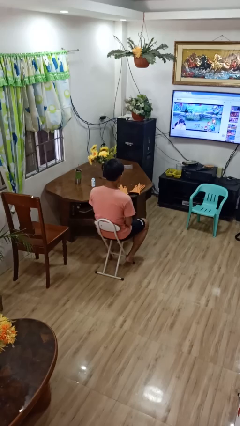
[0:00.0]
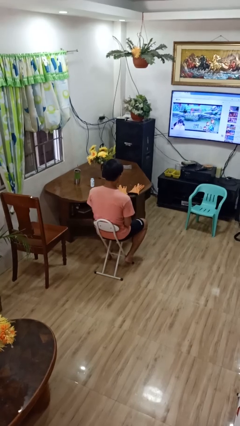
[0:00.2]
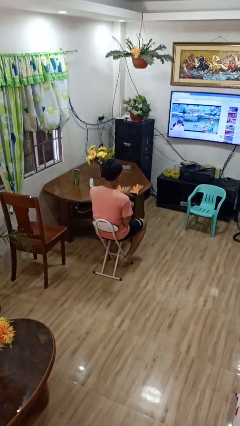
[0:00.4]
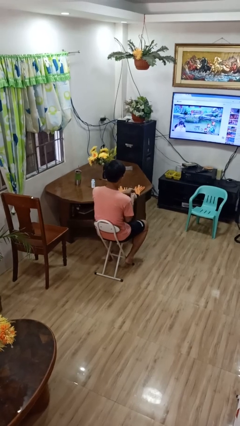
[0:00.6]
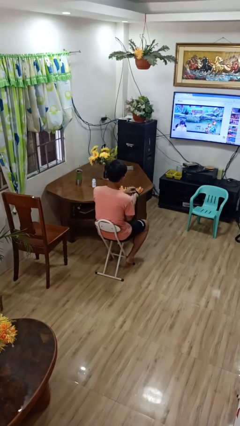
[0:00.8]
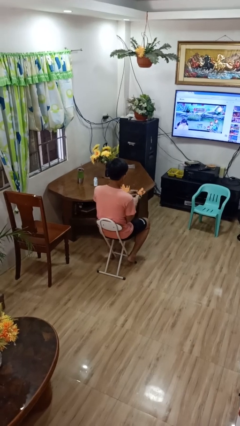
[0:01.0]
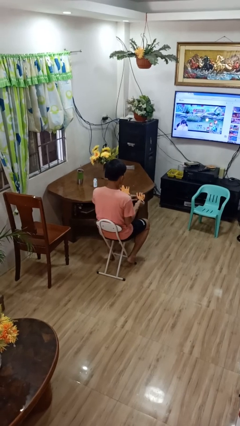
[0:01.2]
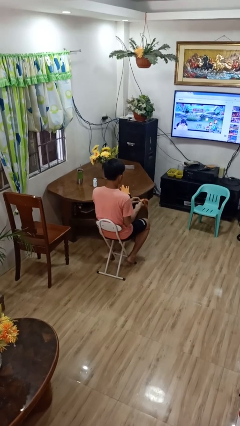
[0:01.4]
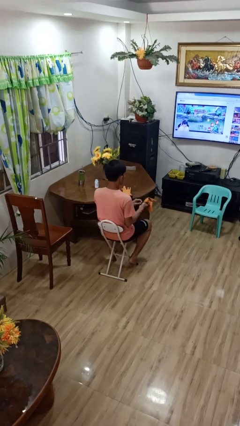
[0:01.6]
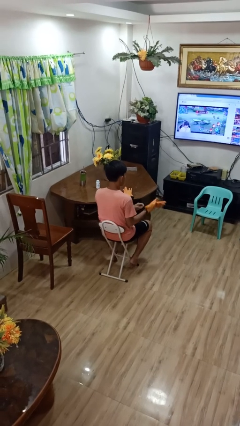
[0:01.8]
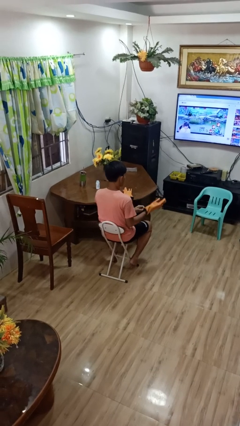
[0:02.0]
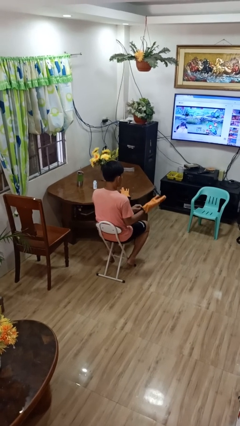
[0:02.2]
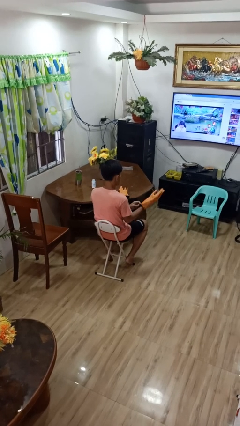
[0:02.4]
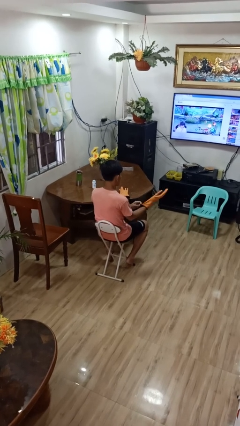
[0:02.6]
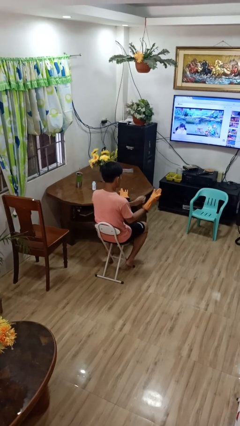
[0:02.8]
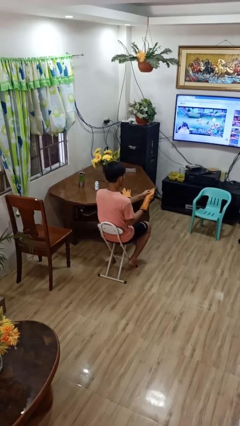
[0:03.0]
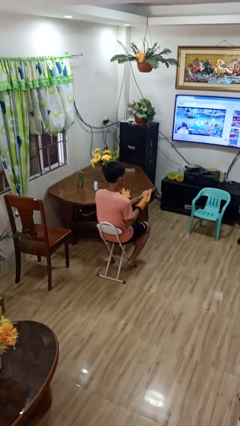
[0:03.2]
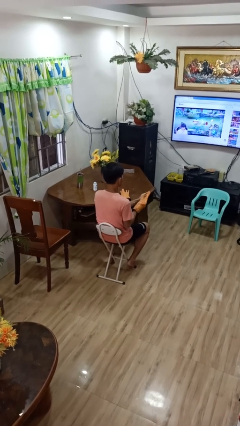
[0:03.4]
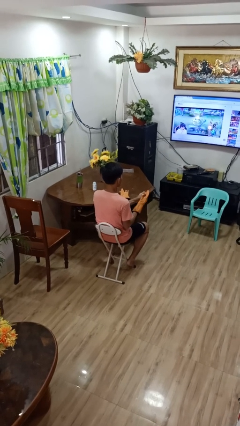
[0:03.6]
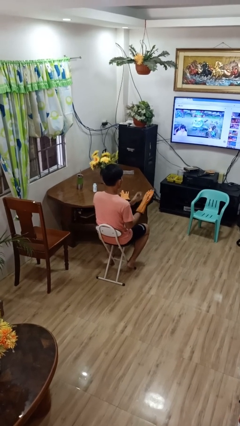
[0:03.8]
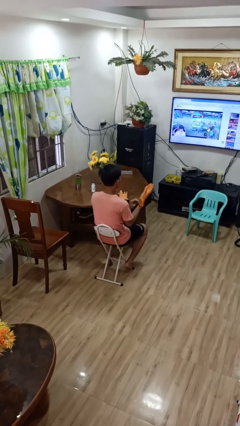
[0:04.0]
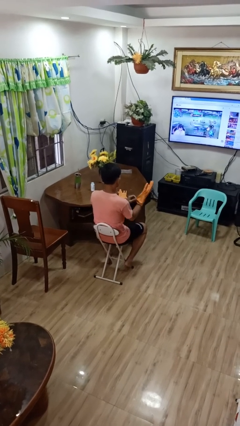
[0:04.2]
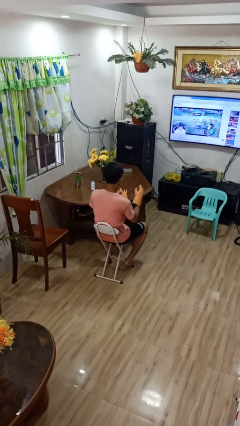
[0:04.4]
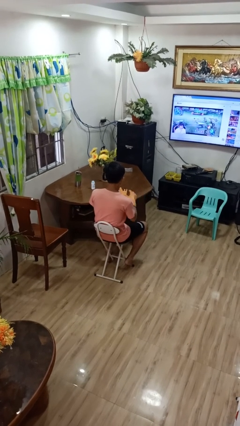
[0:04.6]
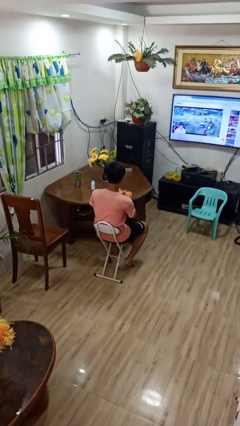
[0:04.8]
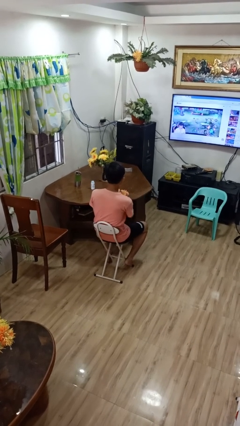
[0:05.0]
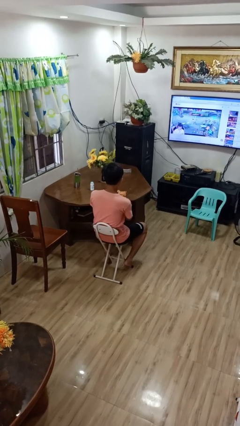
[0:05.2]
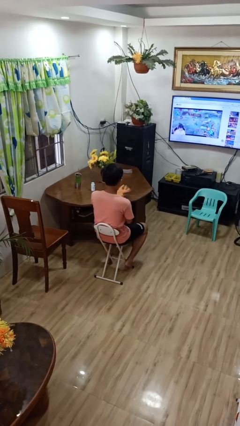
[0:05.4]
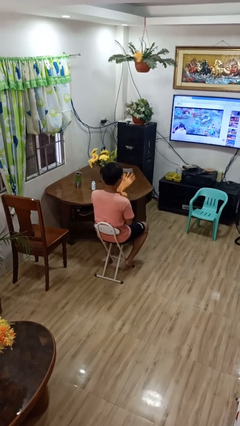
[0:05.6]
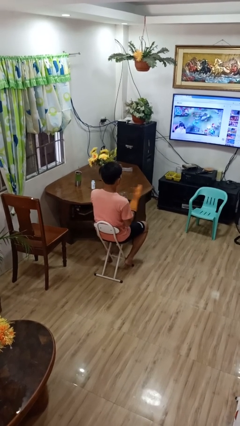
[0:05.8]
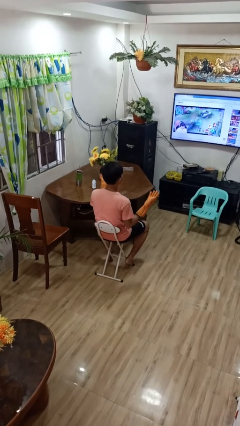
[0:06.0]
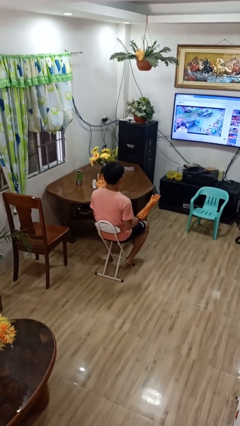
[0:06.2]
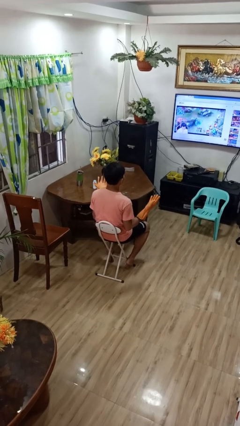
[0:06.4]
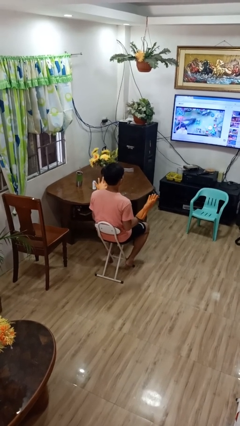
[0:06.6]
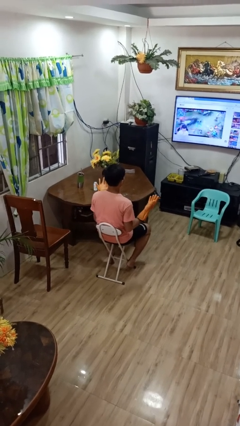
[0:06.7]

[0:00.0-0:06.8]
person puts on gloves

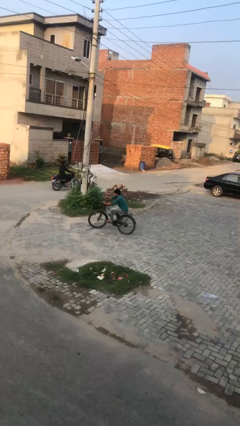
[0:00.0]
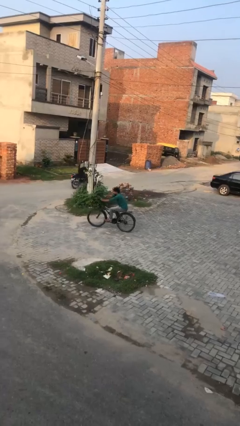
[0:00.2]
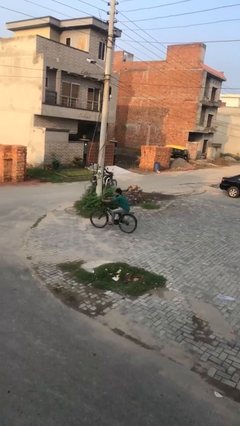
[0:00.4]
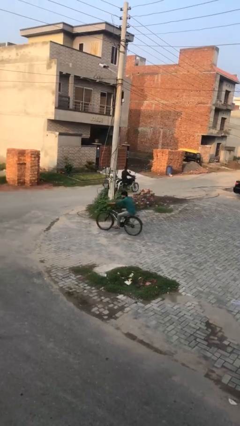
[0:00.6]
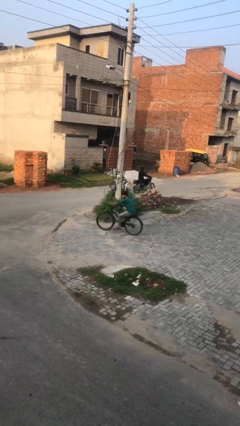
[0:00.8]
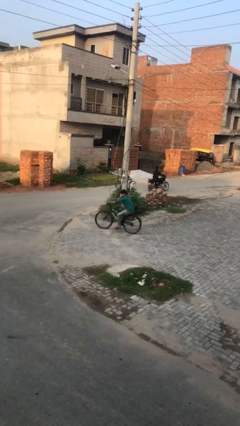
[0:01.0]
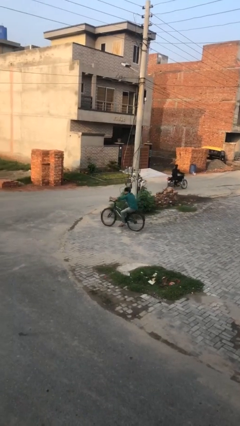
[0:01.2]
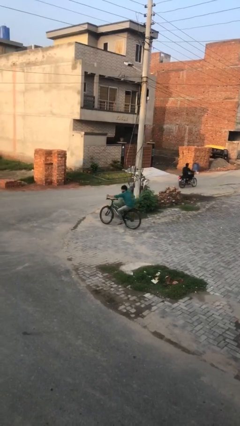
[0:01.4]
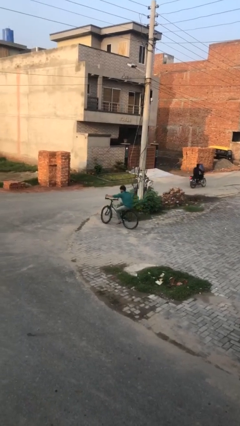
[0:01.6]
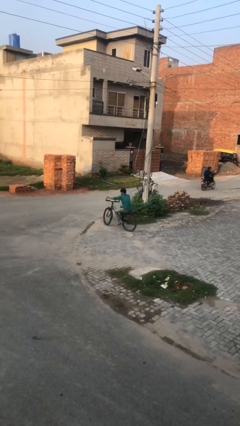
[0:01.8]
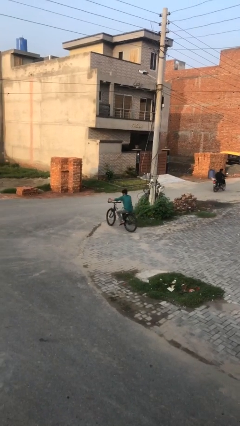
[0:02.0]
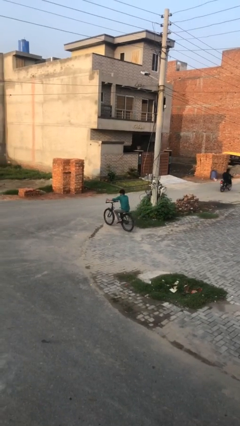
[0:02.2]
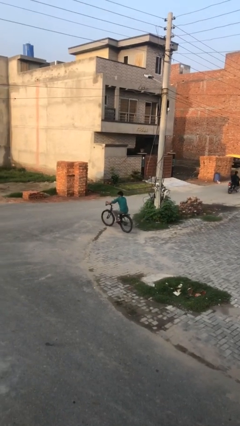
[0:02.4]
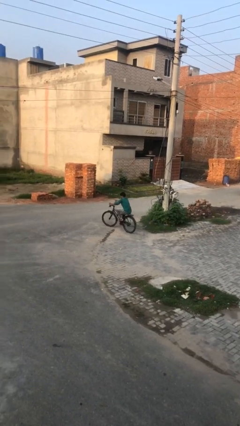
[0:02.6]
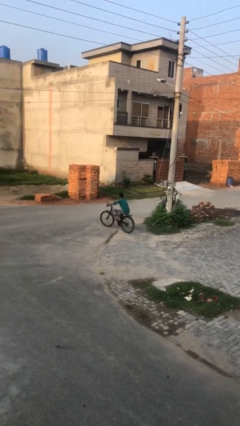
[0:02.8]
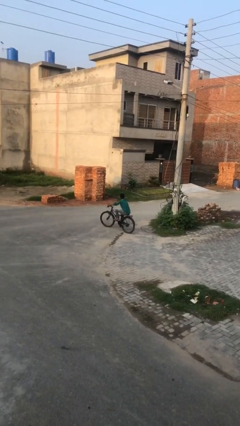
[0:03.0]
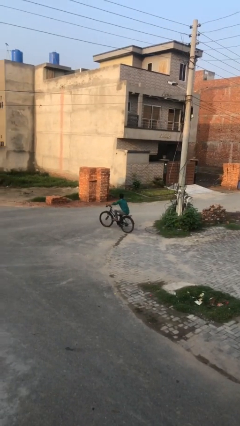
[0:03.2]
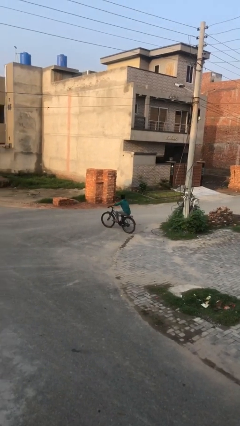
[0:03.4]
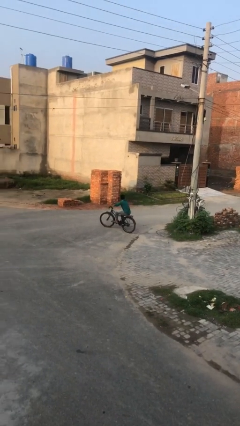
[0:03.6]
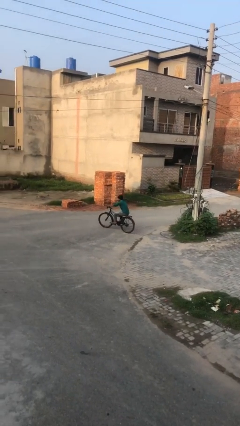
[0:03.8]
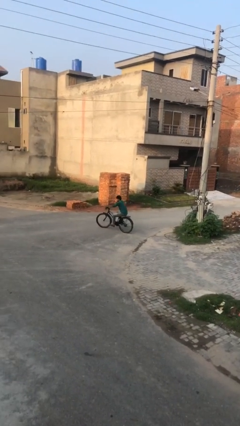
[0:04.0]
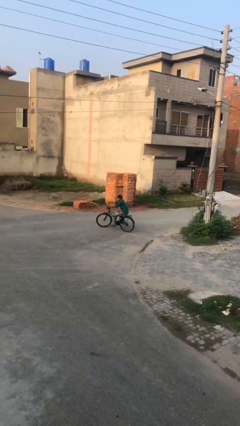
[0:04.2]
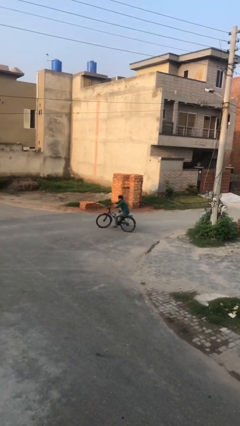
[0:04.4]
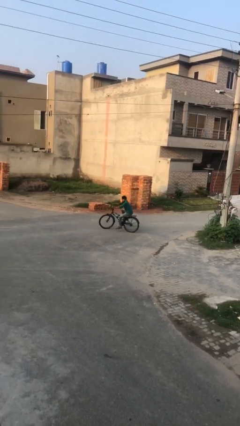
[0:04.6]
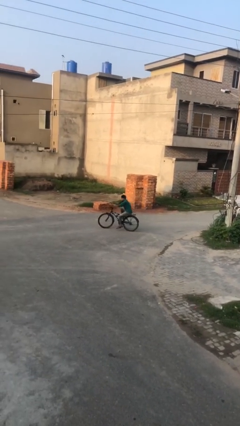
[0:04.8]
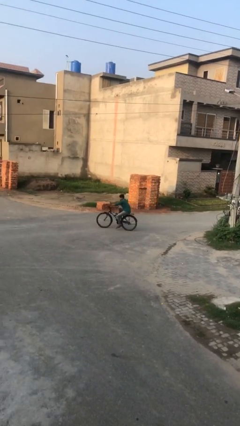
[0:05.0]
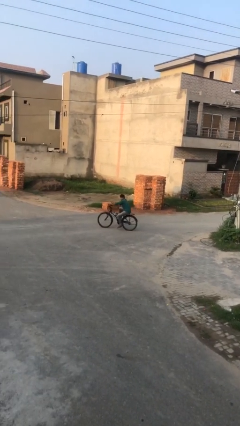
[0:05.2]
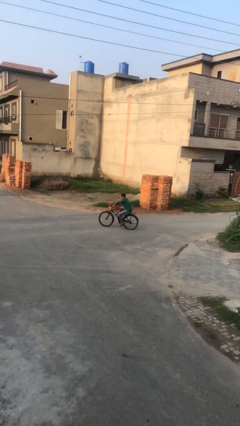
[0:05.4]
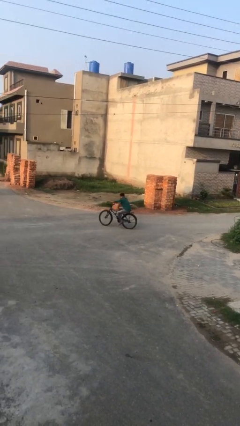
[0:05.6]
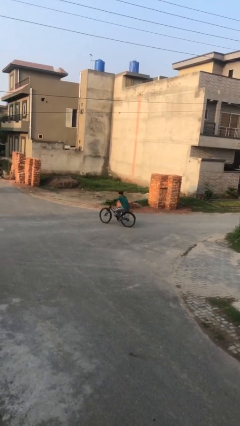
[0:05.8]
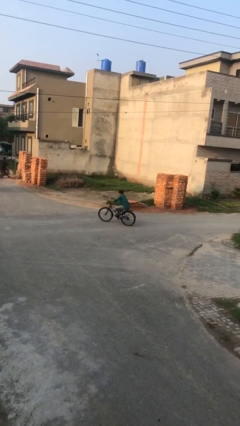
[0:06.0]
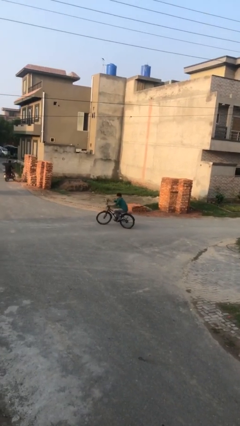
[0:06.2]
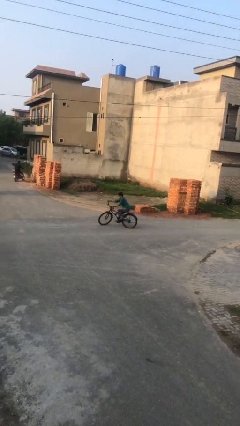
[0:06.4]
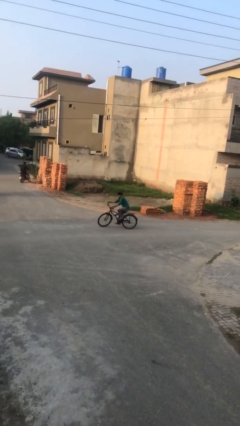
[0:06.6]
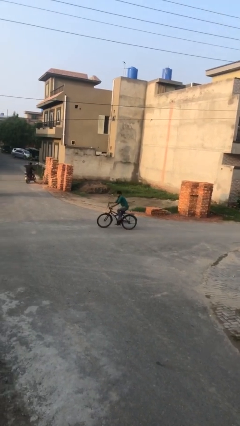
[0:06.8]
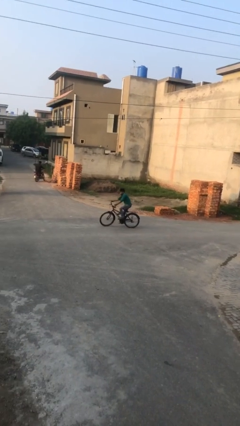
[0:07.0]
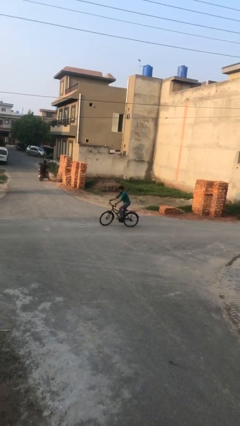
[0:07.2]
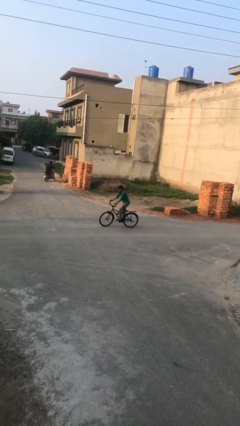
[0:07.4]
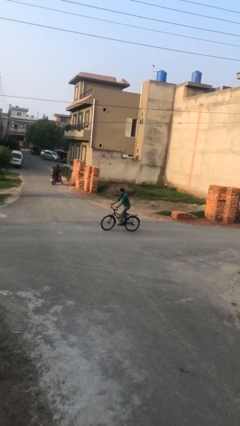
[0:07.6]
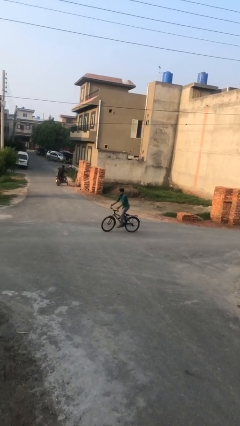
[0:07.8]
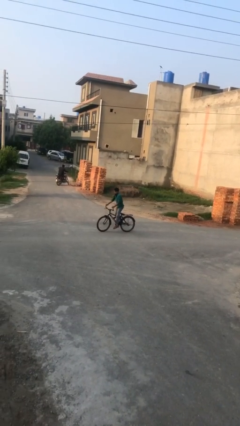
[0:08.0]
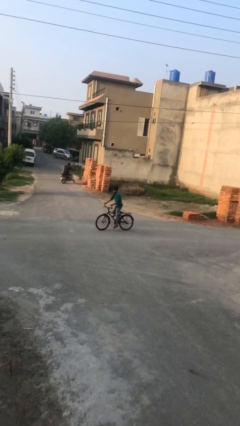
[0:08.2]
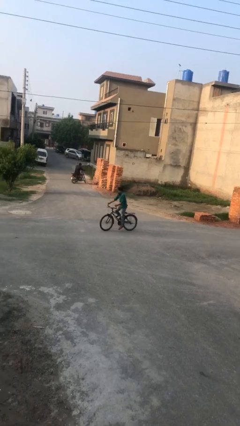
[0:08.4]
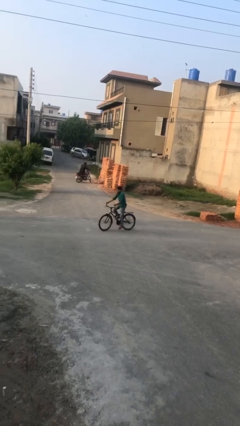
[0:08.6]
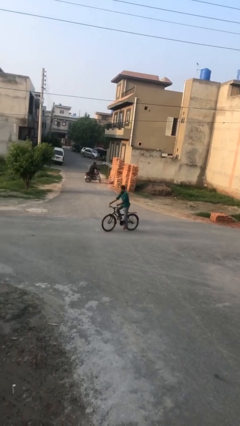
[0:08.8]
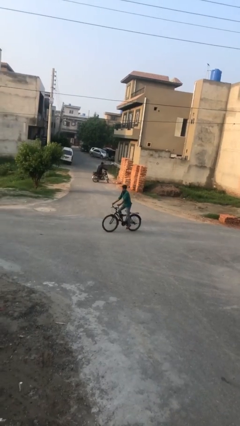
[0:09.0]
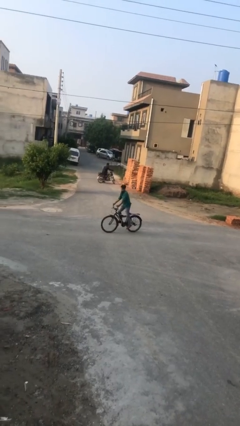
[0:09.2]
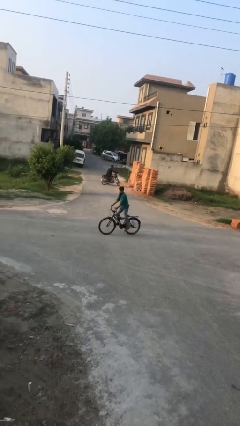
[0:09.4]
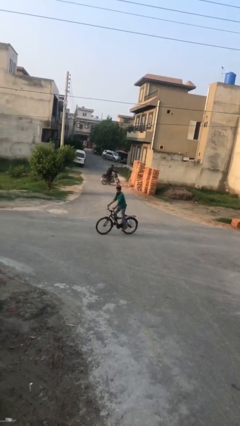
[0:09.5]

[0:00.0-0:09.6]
person rides bicycle

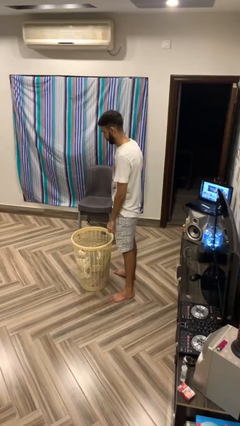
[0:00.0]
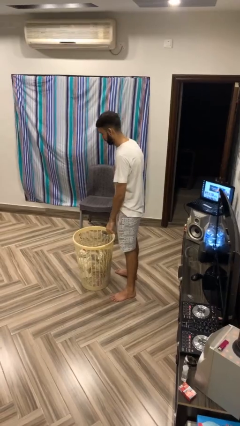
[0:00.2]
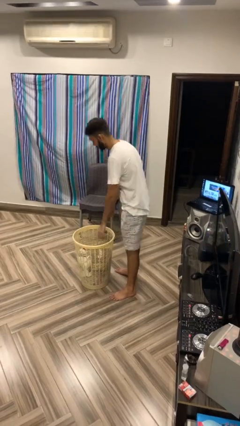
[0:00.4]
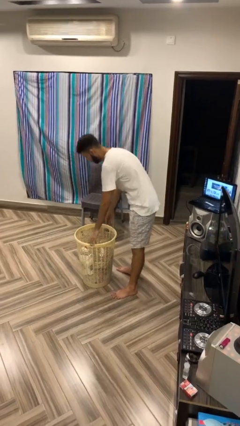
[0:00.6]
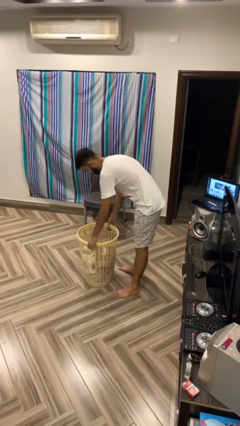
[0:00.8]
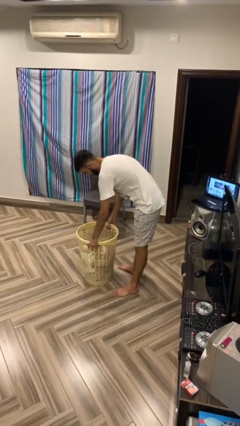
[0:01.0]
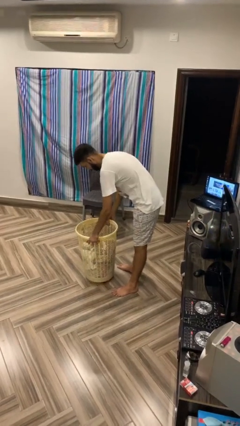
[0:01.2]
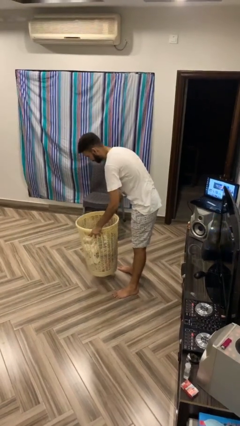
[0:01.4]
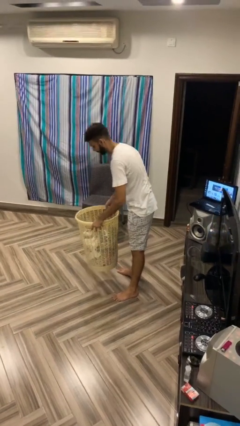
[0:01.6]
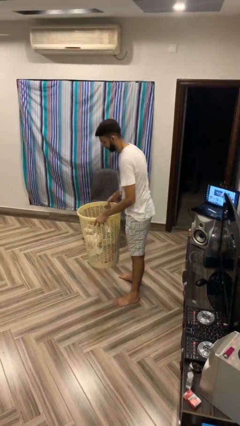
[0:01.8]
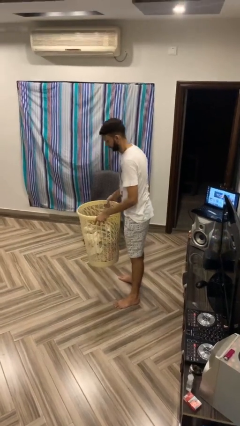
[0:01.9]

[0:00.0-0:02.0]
person picks up object from floor
